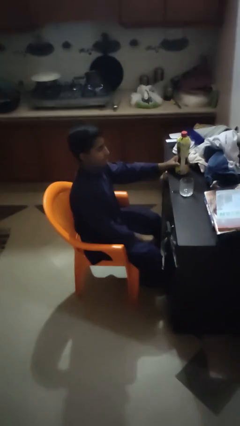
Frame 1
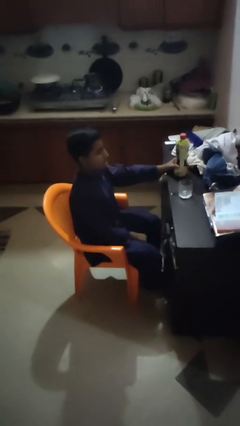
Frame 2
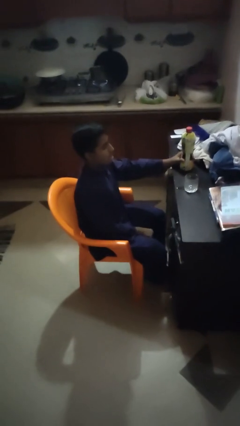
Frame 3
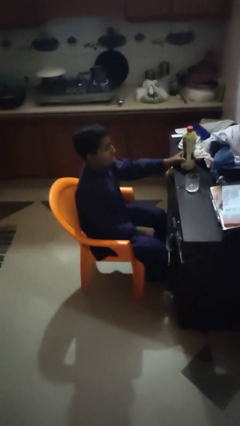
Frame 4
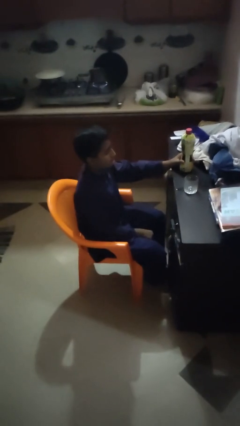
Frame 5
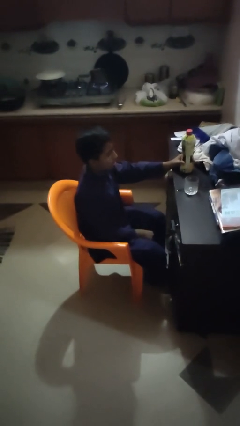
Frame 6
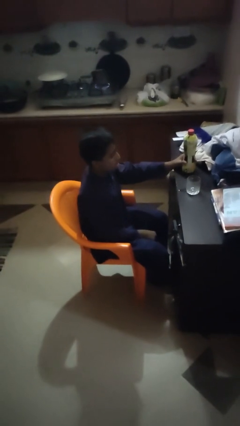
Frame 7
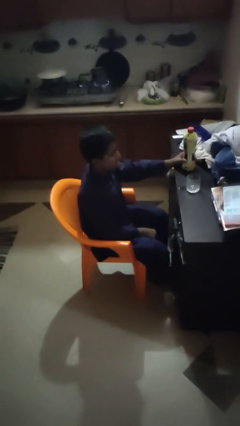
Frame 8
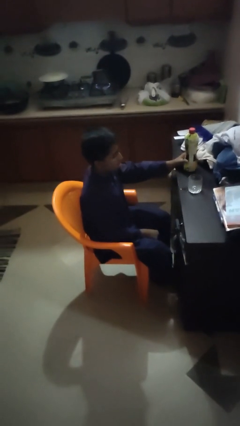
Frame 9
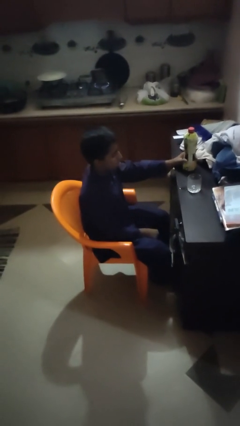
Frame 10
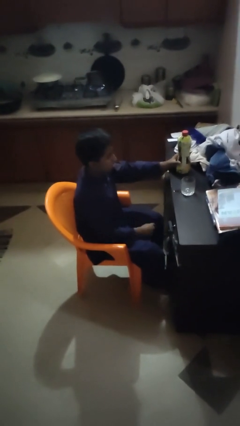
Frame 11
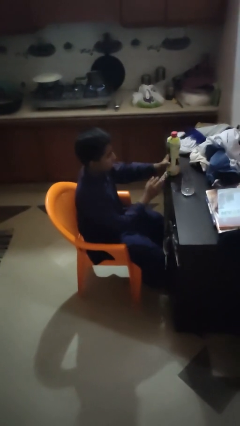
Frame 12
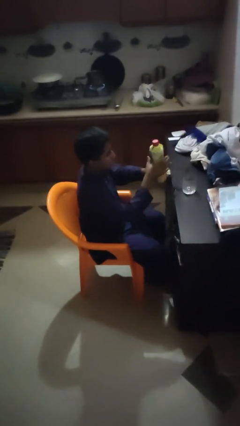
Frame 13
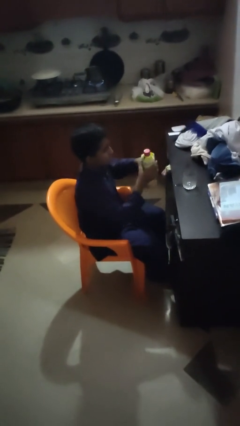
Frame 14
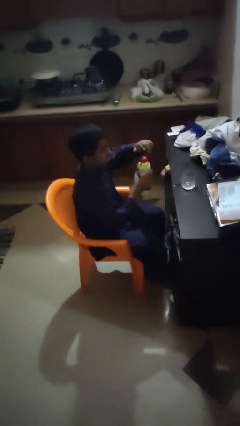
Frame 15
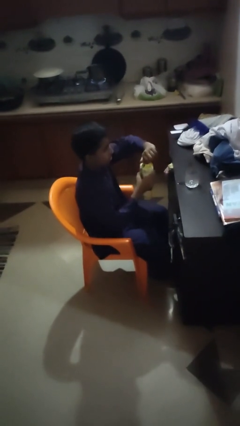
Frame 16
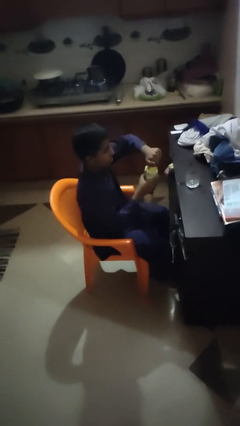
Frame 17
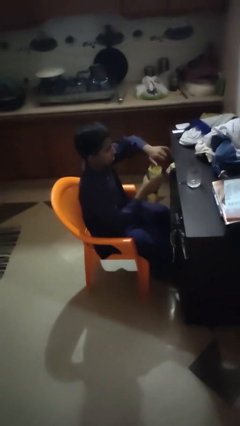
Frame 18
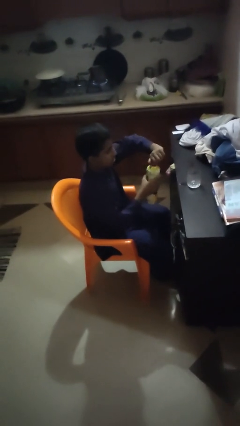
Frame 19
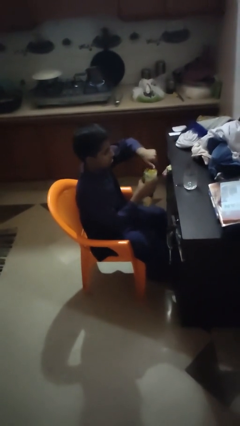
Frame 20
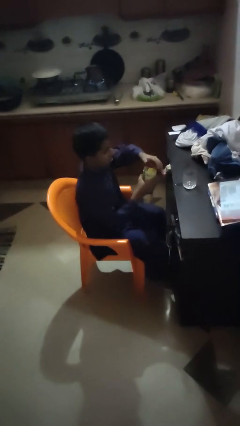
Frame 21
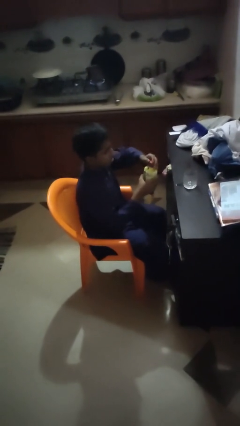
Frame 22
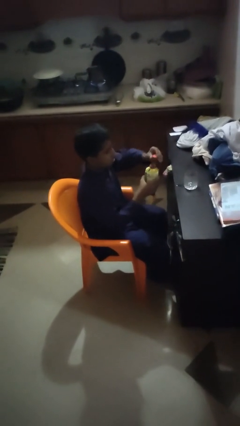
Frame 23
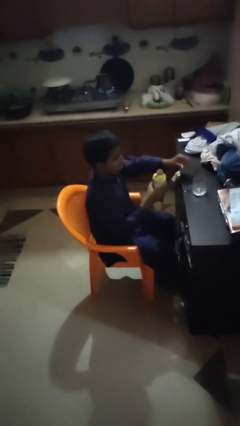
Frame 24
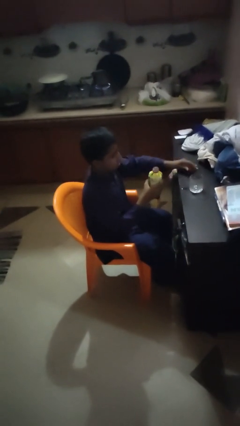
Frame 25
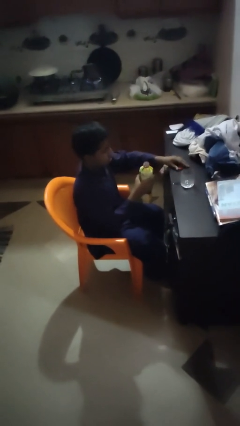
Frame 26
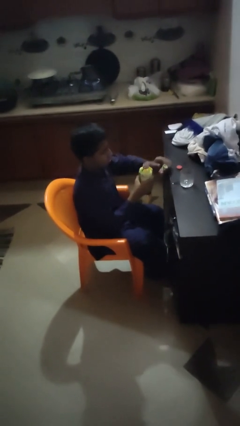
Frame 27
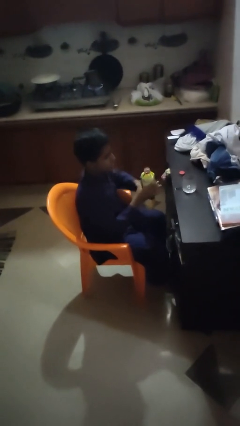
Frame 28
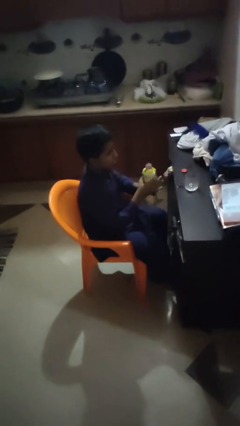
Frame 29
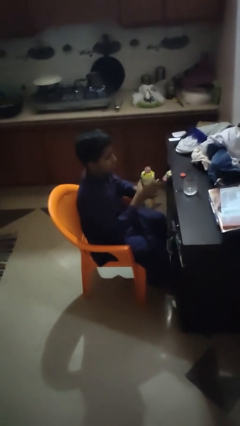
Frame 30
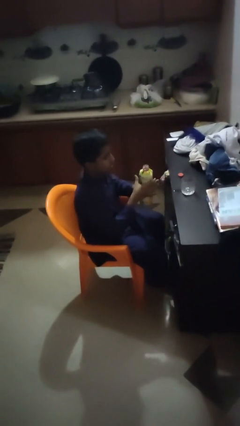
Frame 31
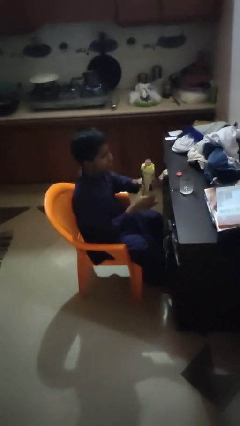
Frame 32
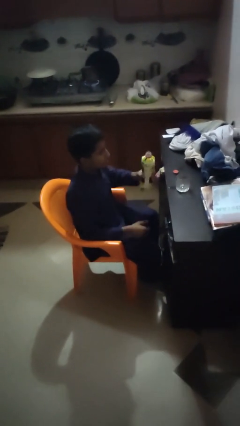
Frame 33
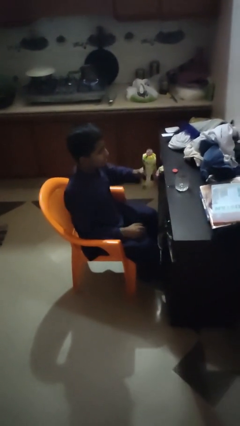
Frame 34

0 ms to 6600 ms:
person unscrews lid from bottle

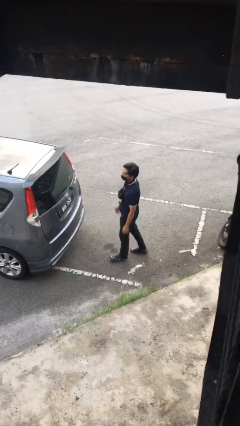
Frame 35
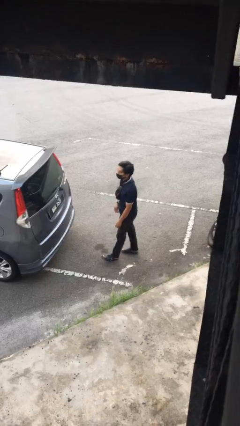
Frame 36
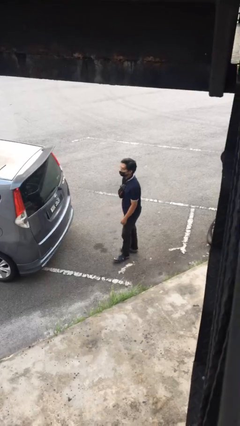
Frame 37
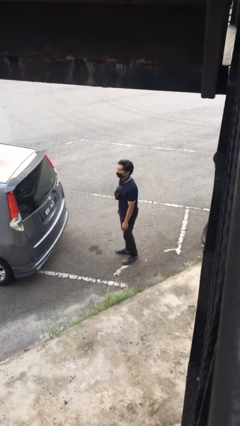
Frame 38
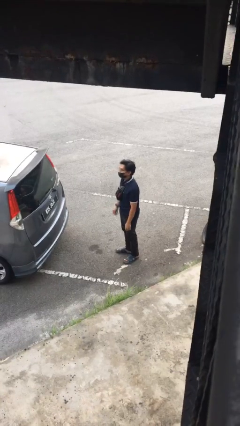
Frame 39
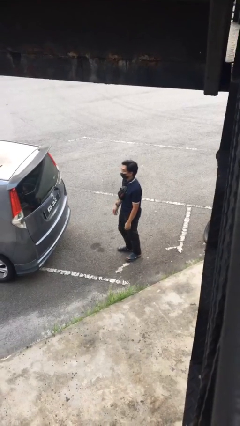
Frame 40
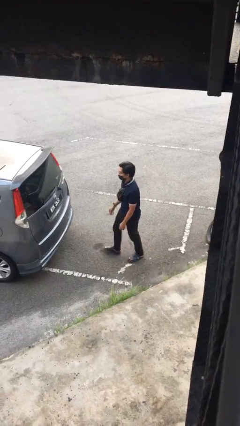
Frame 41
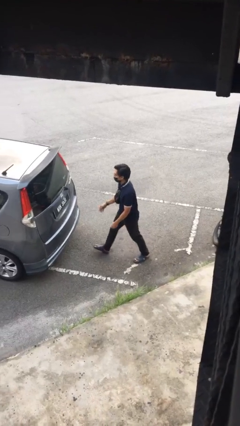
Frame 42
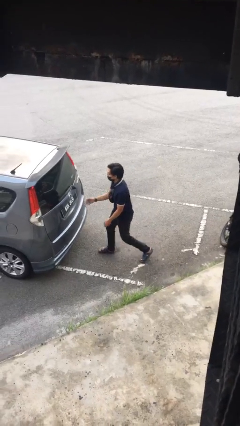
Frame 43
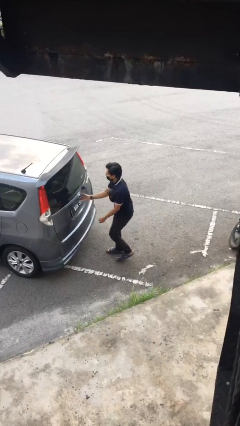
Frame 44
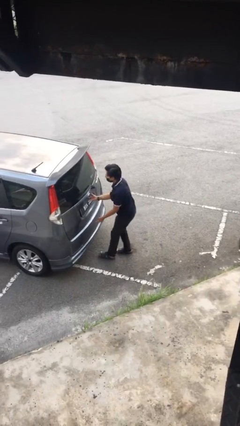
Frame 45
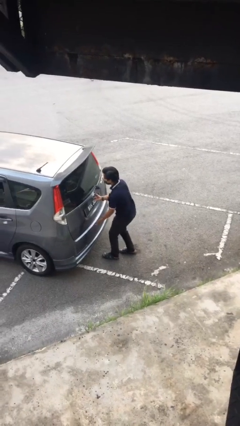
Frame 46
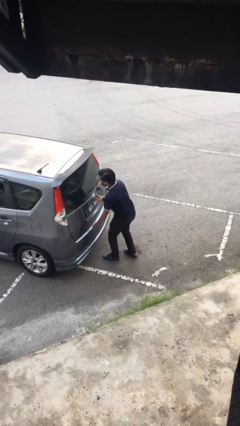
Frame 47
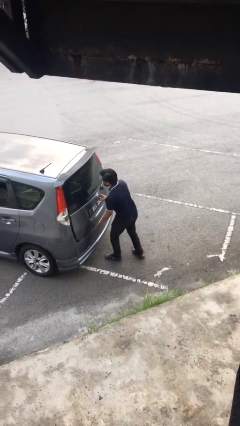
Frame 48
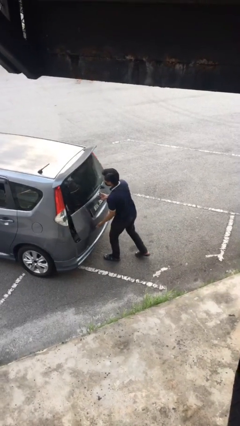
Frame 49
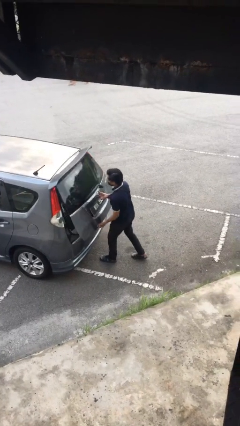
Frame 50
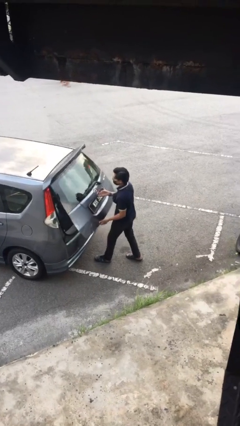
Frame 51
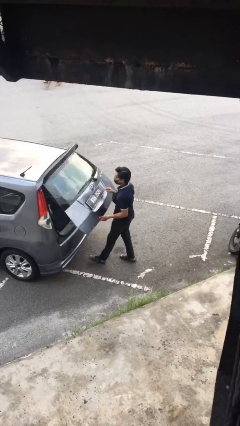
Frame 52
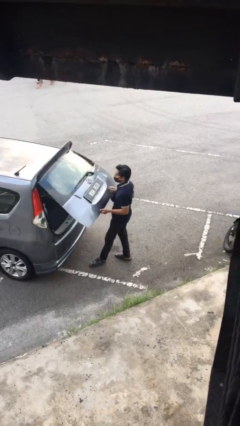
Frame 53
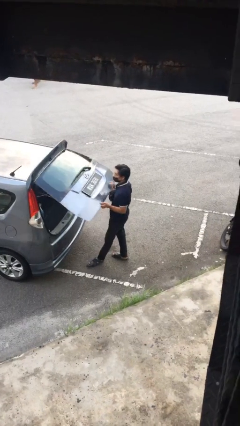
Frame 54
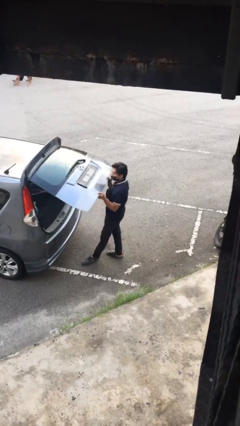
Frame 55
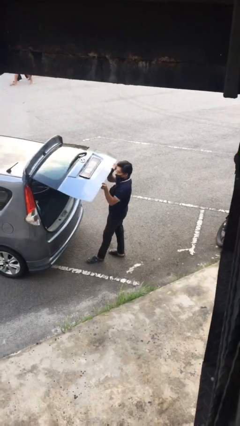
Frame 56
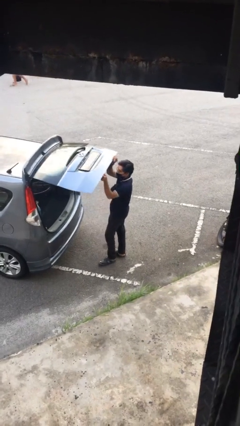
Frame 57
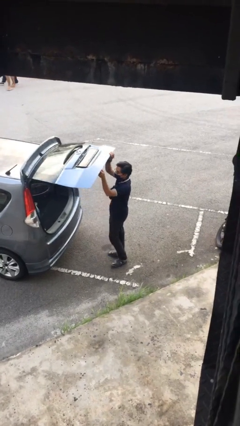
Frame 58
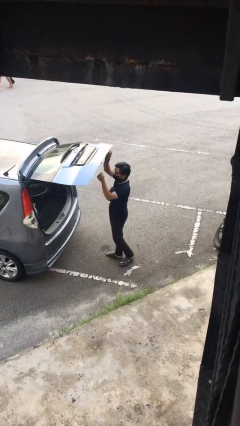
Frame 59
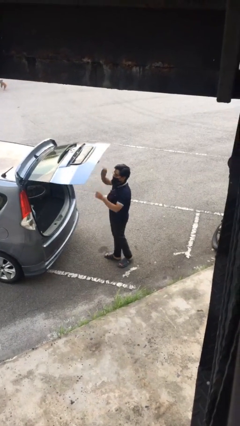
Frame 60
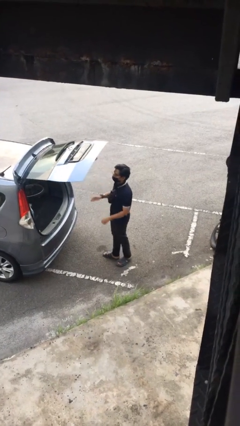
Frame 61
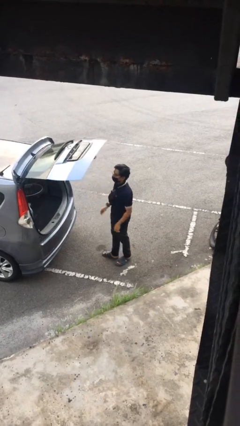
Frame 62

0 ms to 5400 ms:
person opens car trunk

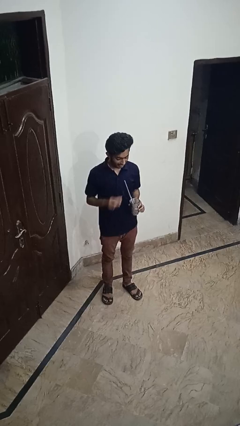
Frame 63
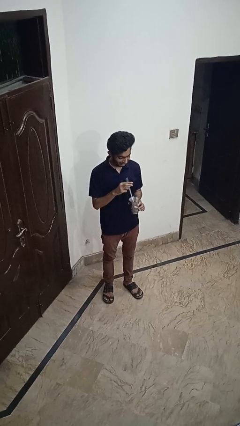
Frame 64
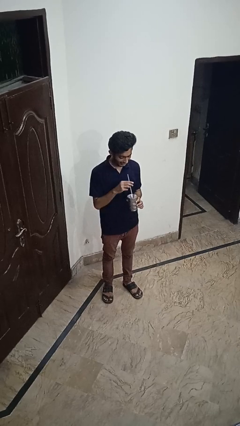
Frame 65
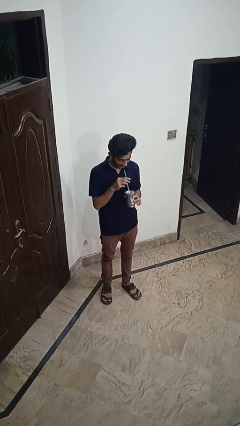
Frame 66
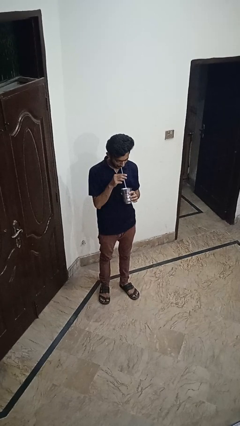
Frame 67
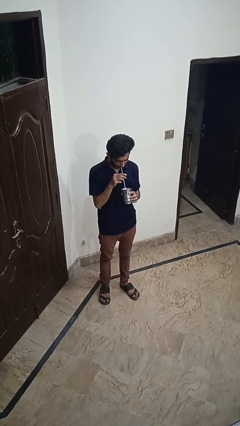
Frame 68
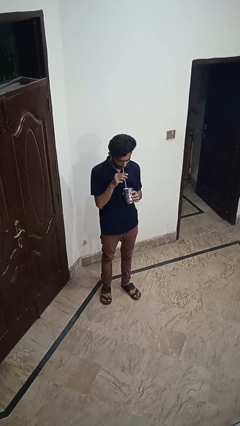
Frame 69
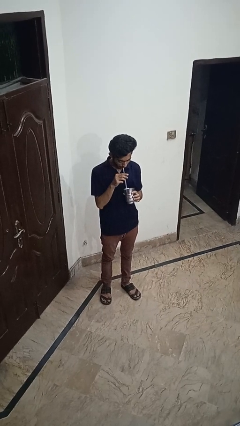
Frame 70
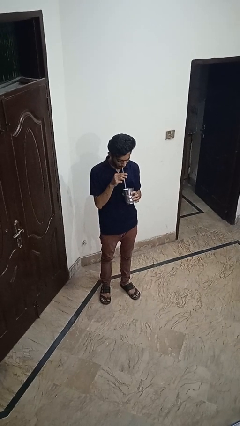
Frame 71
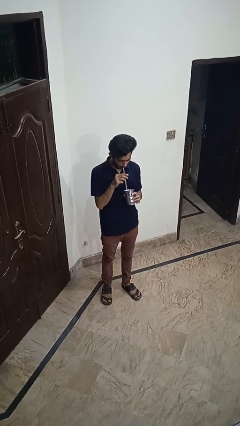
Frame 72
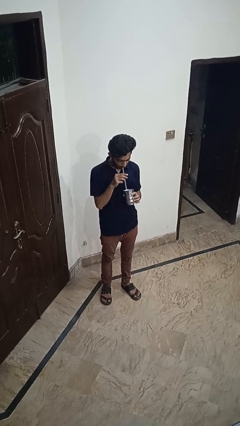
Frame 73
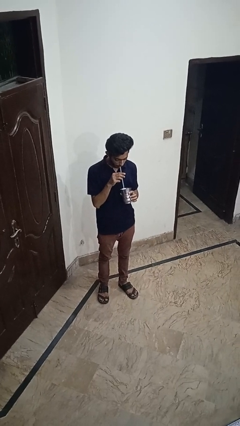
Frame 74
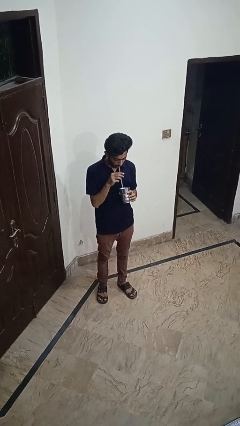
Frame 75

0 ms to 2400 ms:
person drinks from straw

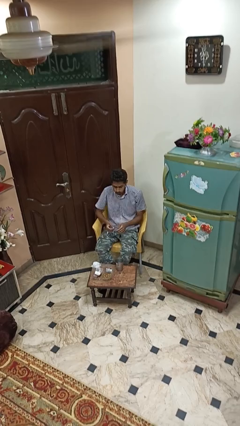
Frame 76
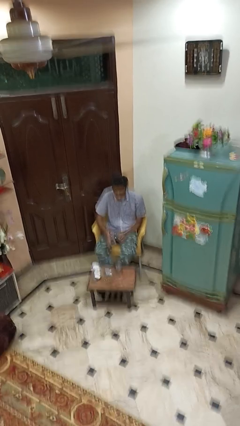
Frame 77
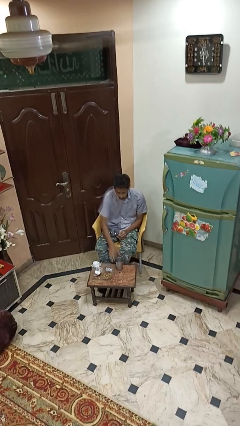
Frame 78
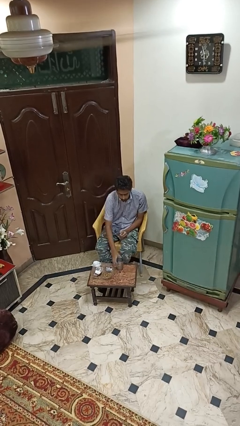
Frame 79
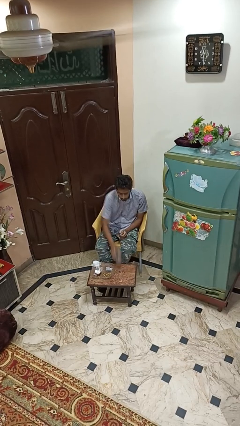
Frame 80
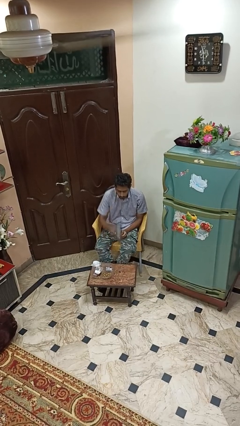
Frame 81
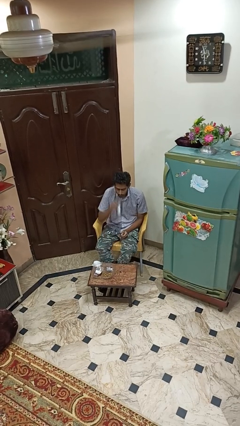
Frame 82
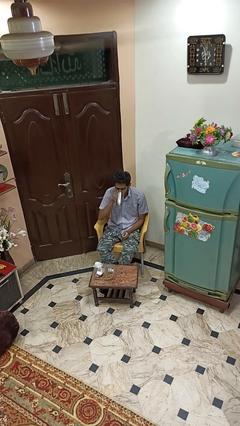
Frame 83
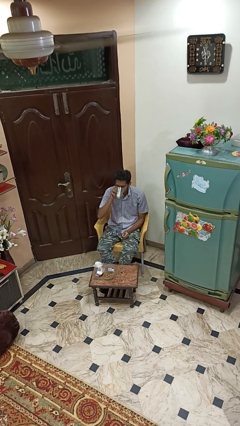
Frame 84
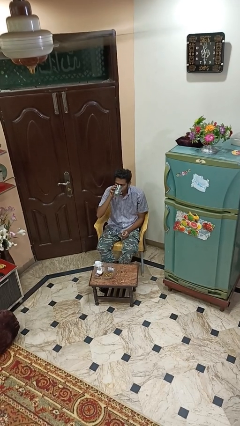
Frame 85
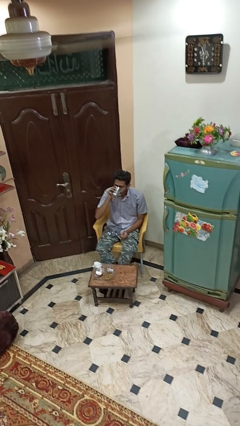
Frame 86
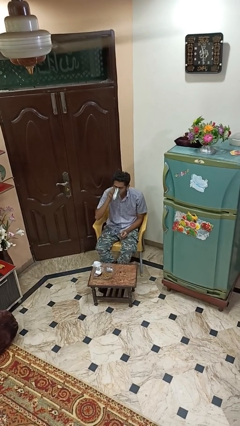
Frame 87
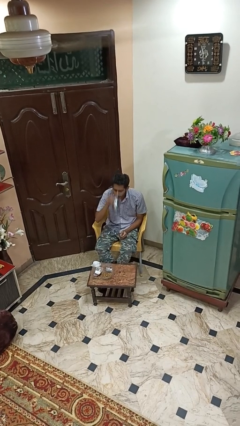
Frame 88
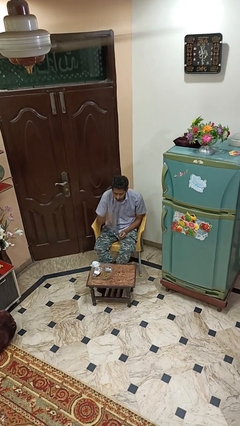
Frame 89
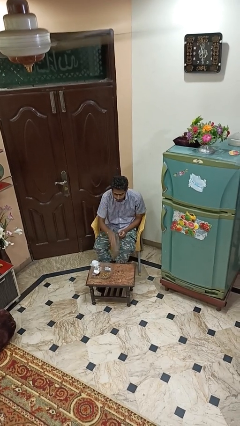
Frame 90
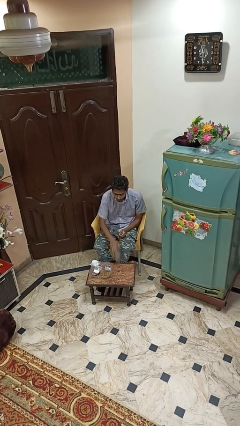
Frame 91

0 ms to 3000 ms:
person drinks from cup

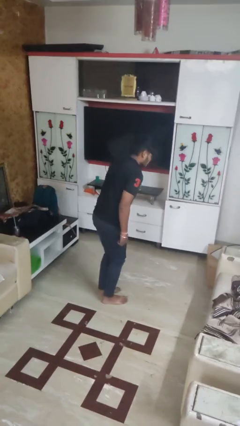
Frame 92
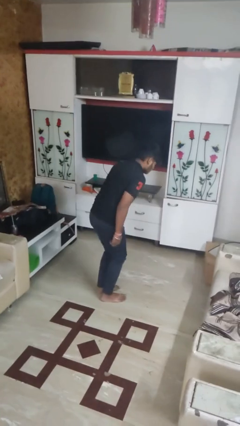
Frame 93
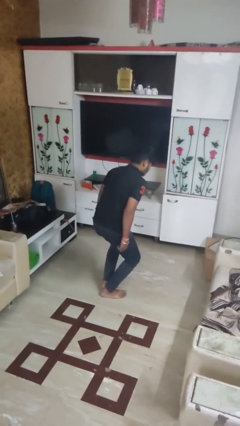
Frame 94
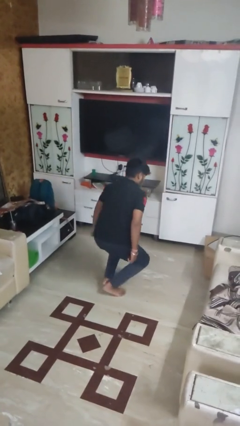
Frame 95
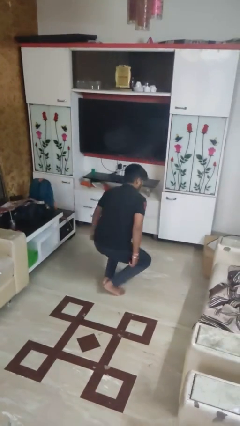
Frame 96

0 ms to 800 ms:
person kneels
